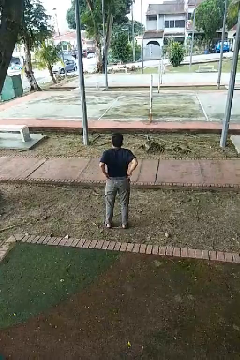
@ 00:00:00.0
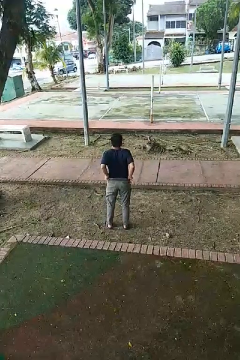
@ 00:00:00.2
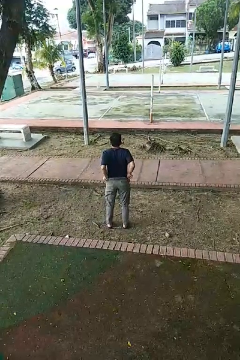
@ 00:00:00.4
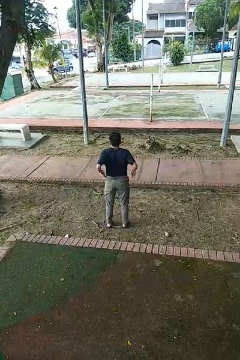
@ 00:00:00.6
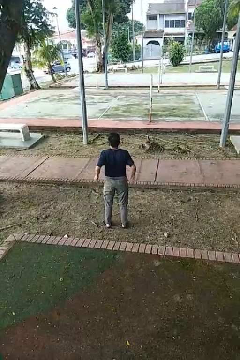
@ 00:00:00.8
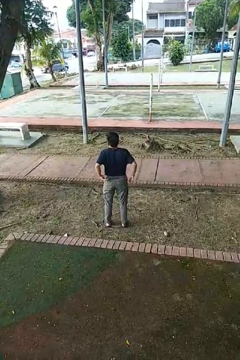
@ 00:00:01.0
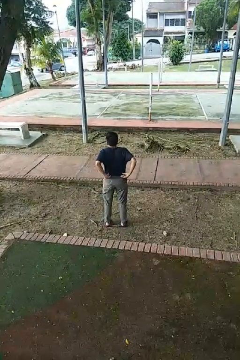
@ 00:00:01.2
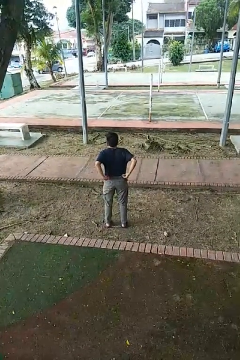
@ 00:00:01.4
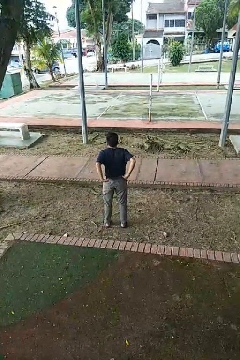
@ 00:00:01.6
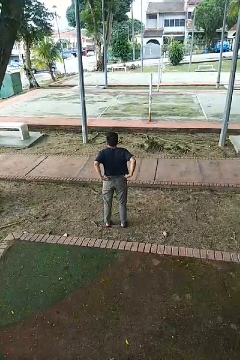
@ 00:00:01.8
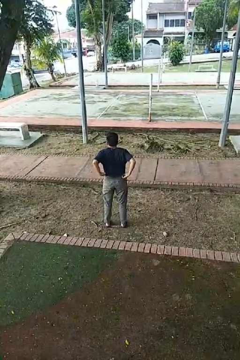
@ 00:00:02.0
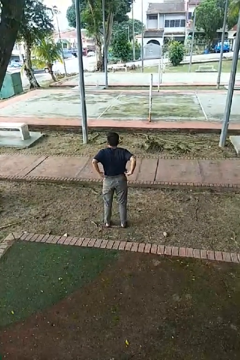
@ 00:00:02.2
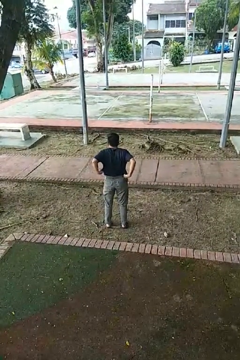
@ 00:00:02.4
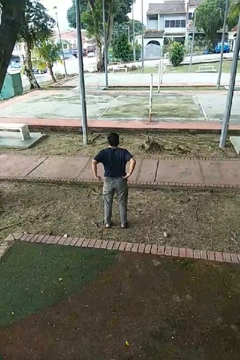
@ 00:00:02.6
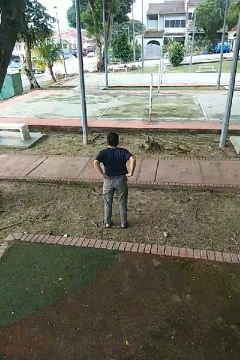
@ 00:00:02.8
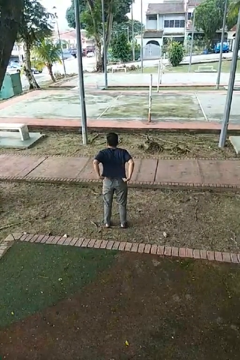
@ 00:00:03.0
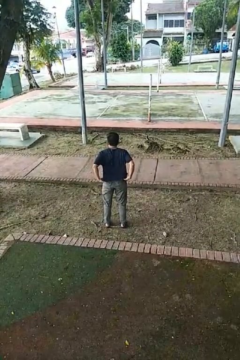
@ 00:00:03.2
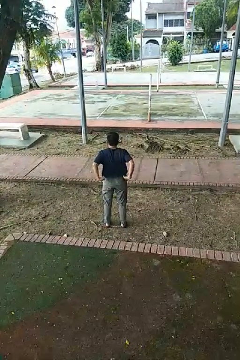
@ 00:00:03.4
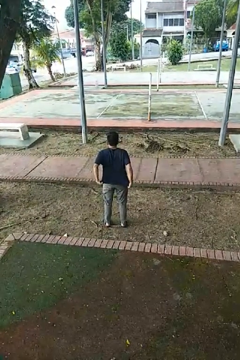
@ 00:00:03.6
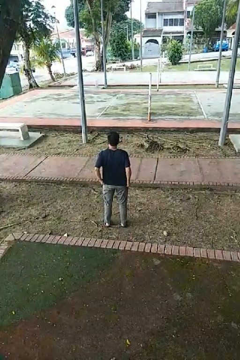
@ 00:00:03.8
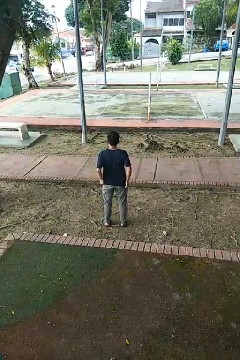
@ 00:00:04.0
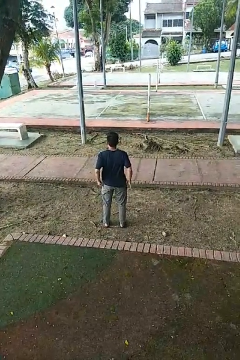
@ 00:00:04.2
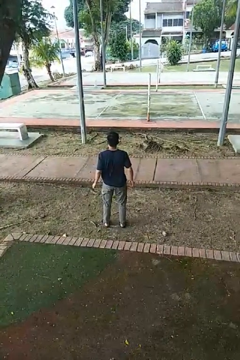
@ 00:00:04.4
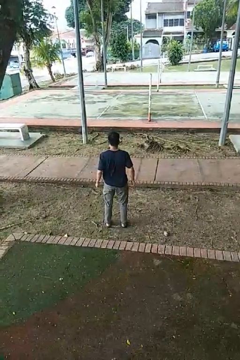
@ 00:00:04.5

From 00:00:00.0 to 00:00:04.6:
person untucks shirt

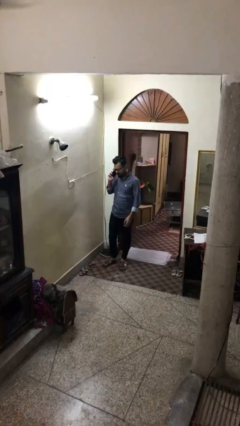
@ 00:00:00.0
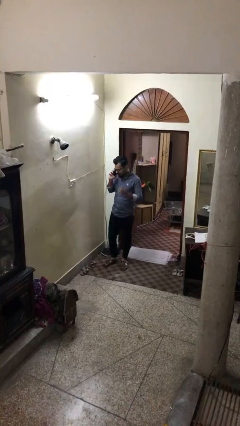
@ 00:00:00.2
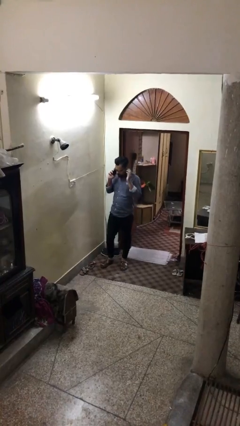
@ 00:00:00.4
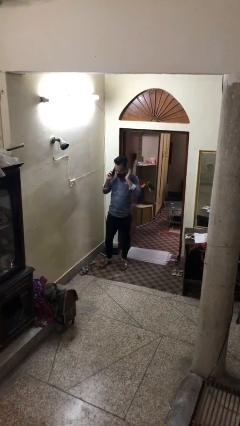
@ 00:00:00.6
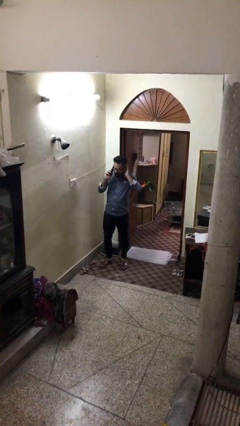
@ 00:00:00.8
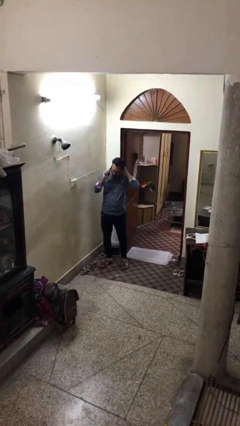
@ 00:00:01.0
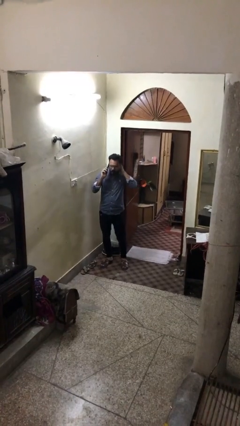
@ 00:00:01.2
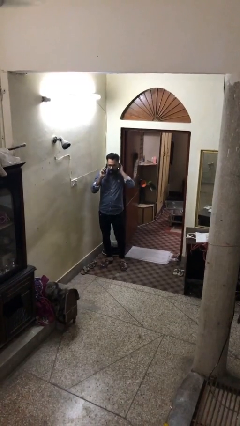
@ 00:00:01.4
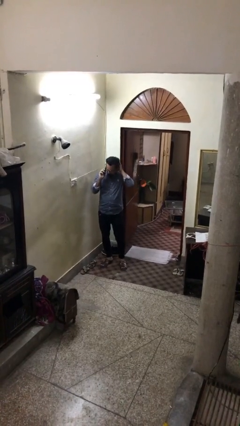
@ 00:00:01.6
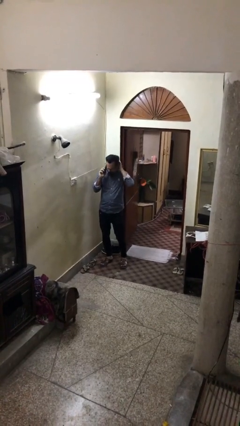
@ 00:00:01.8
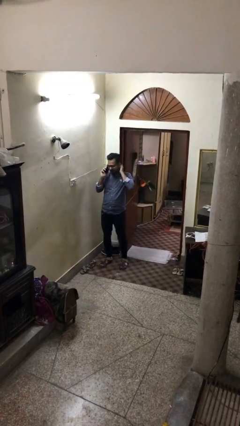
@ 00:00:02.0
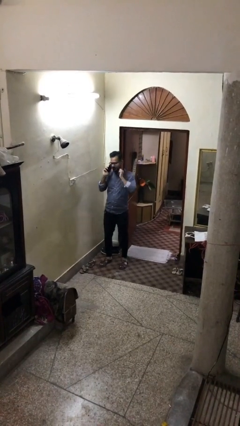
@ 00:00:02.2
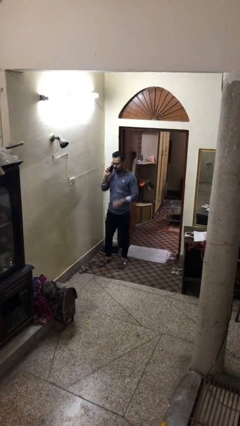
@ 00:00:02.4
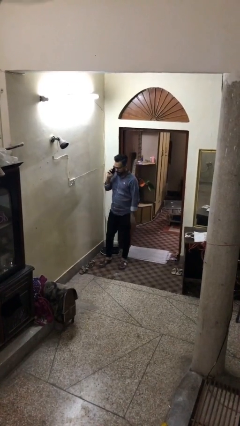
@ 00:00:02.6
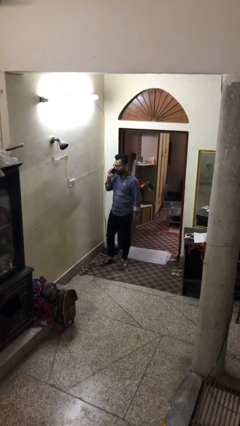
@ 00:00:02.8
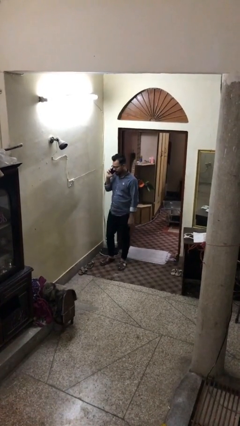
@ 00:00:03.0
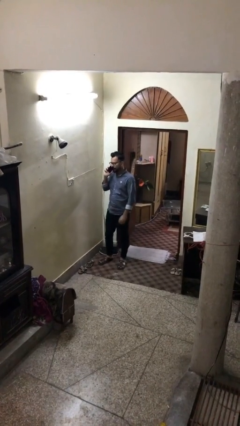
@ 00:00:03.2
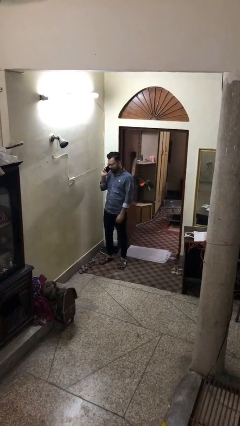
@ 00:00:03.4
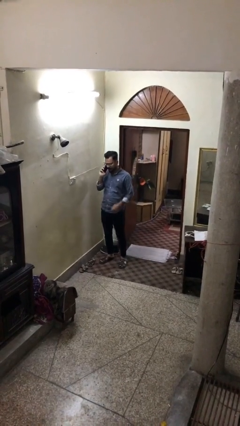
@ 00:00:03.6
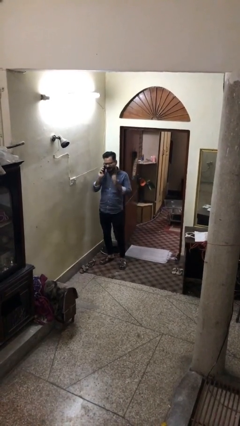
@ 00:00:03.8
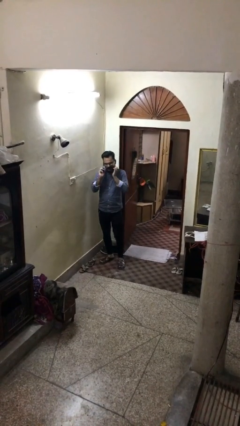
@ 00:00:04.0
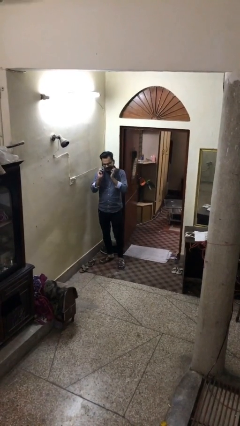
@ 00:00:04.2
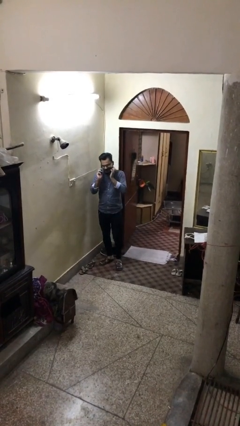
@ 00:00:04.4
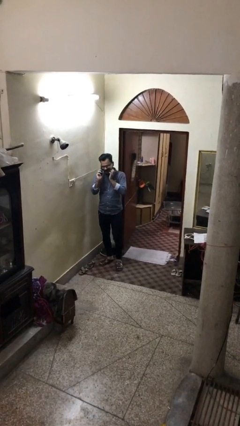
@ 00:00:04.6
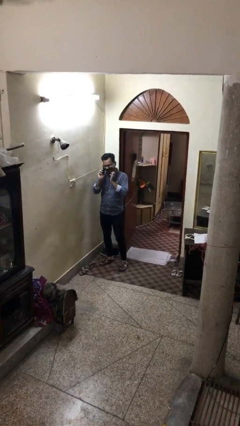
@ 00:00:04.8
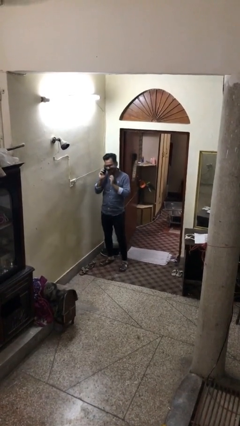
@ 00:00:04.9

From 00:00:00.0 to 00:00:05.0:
person talks on phone

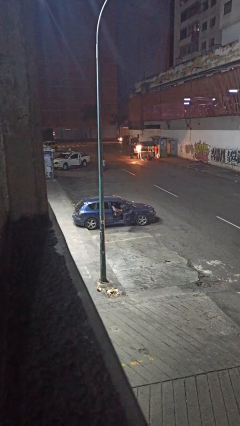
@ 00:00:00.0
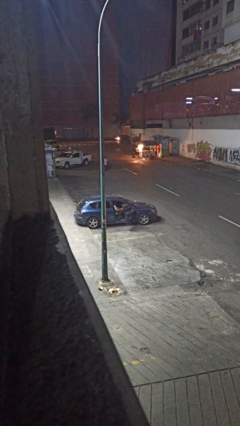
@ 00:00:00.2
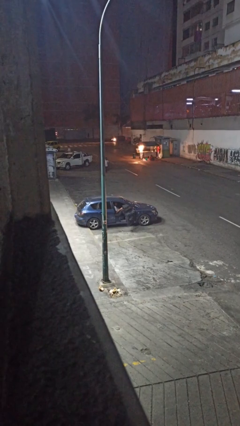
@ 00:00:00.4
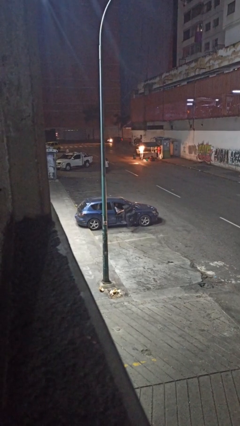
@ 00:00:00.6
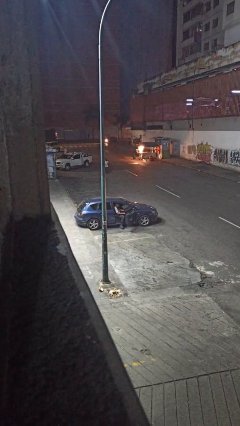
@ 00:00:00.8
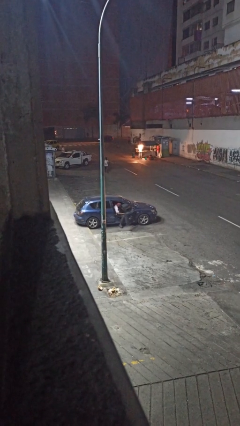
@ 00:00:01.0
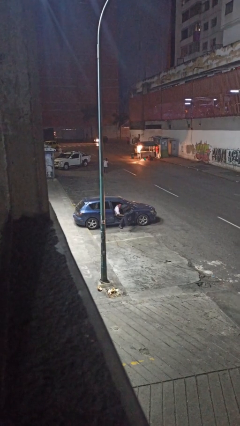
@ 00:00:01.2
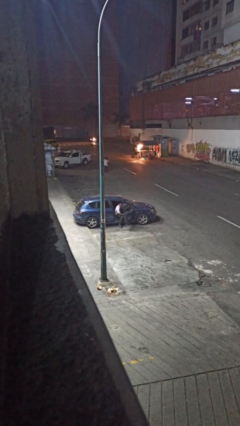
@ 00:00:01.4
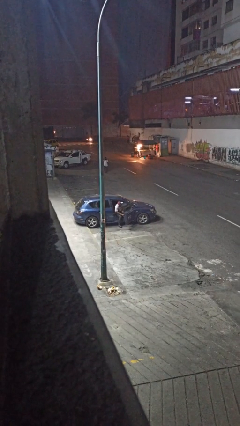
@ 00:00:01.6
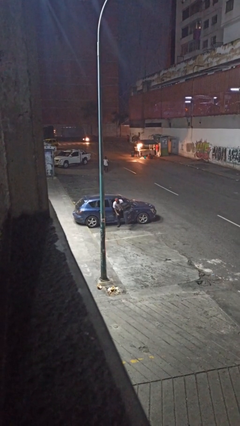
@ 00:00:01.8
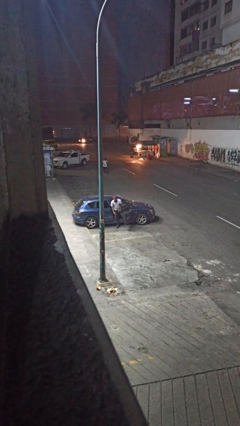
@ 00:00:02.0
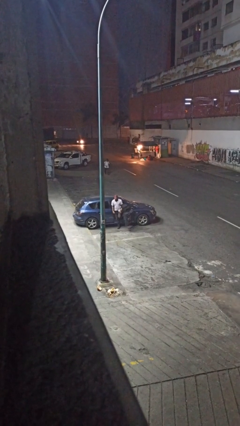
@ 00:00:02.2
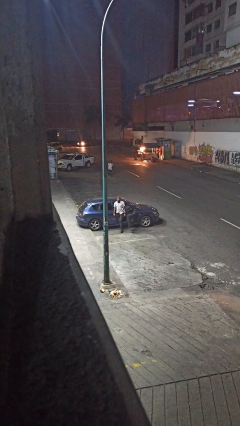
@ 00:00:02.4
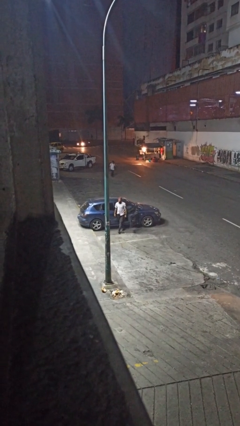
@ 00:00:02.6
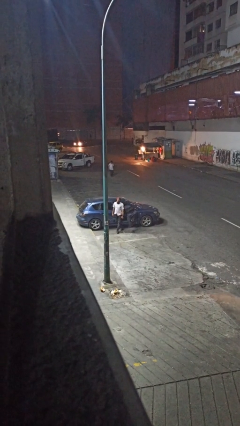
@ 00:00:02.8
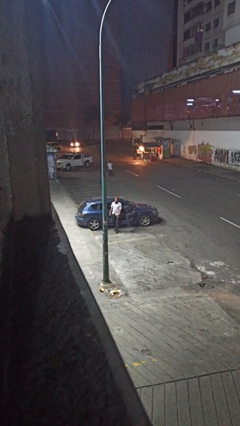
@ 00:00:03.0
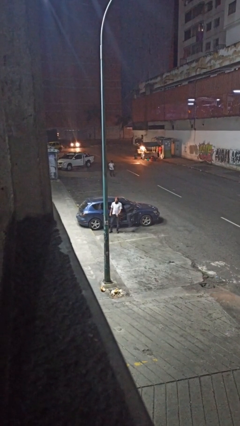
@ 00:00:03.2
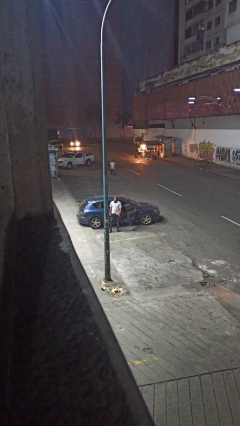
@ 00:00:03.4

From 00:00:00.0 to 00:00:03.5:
person exits car

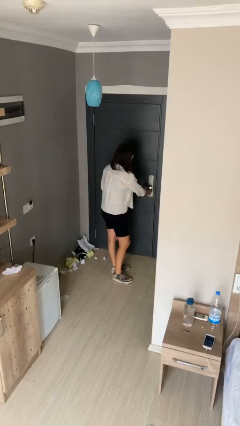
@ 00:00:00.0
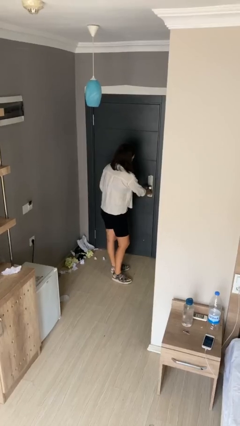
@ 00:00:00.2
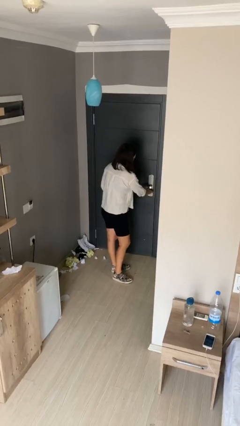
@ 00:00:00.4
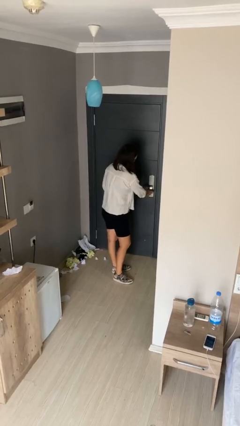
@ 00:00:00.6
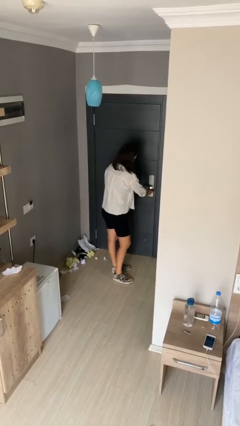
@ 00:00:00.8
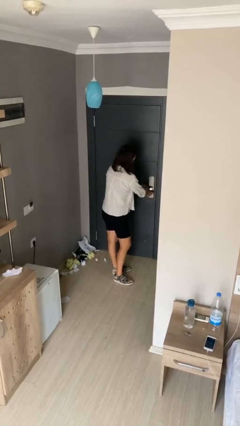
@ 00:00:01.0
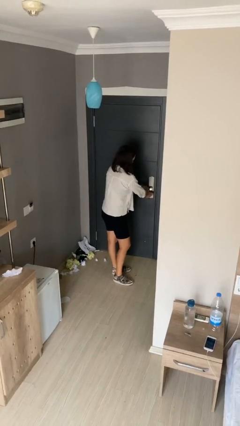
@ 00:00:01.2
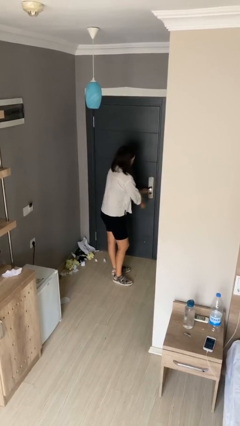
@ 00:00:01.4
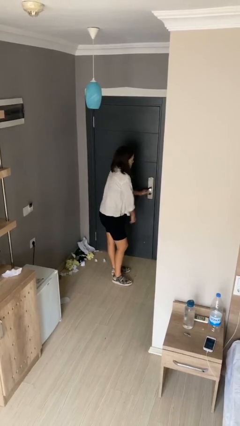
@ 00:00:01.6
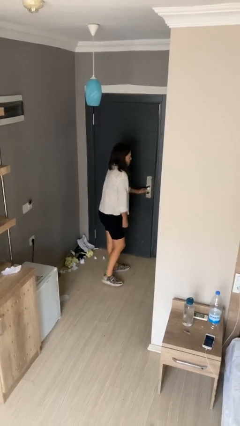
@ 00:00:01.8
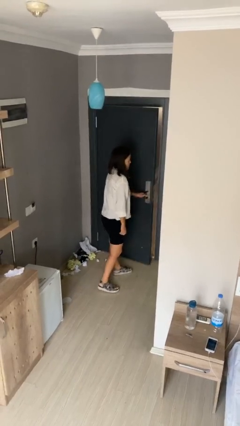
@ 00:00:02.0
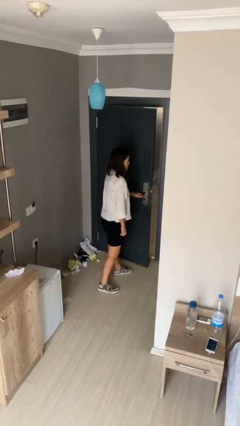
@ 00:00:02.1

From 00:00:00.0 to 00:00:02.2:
person unlocks door with keys

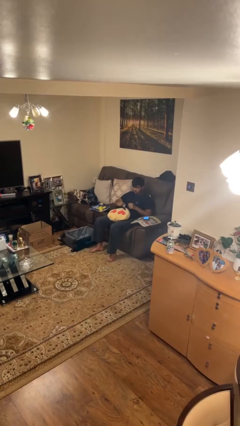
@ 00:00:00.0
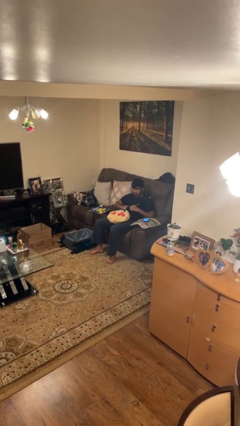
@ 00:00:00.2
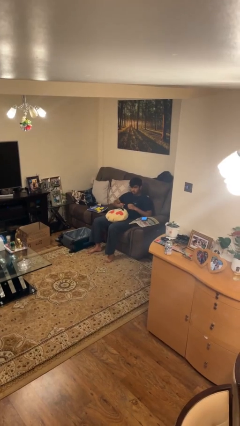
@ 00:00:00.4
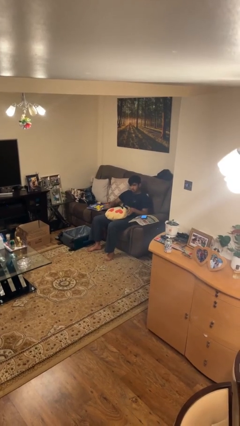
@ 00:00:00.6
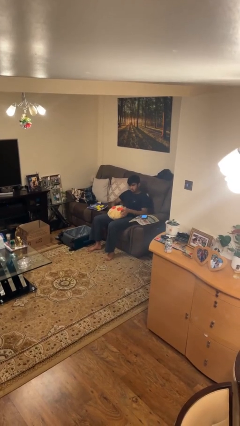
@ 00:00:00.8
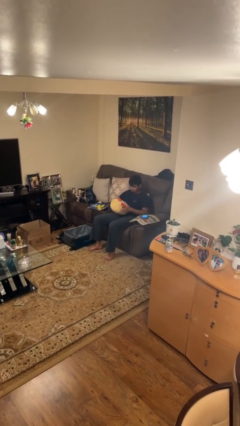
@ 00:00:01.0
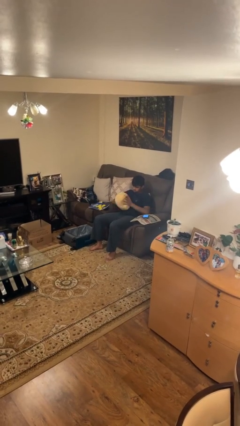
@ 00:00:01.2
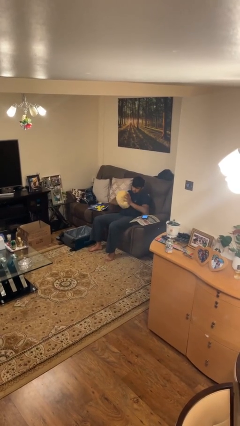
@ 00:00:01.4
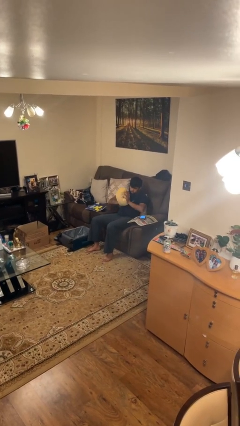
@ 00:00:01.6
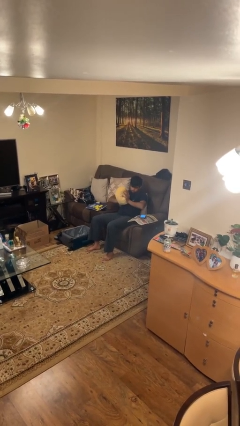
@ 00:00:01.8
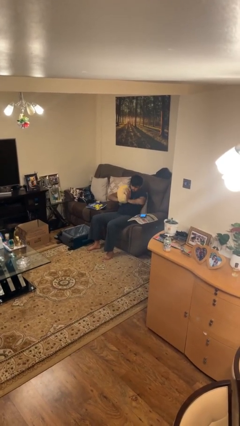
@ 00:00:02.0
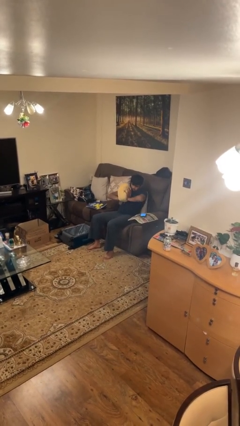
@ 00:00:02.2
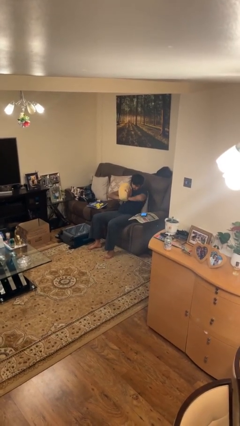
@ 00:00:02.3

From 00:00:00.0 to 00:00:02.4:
person squeezes object

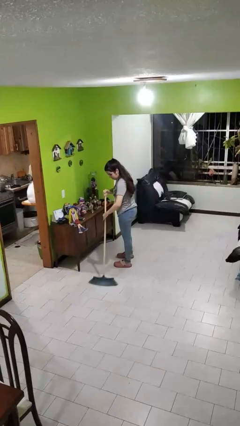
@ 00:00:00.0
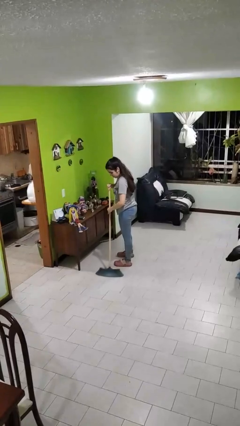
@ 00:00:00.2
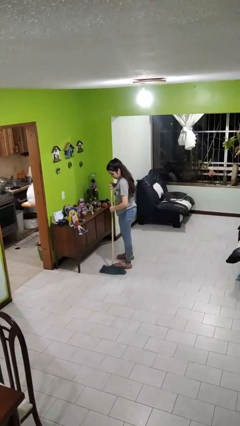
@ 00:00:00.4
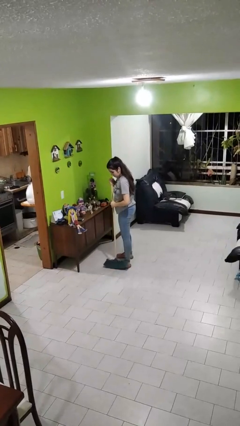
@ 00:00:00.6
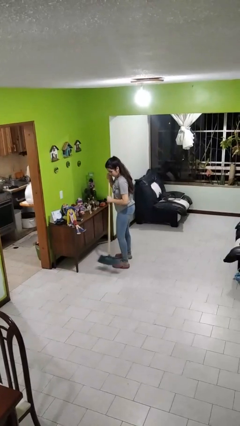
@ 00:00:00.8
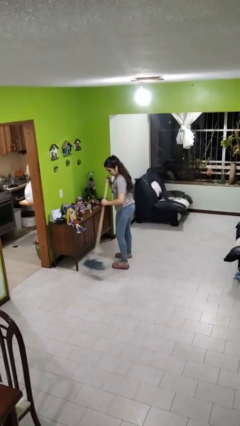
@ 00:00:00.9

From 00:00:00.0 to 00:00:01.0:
person sweeps floor
